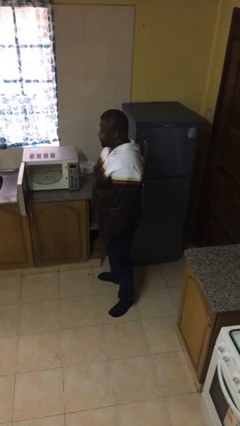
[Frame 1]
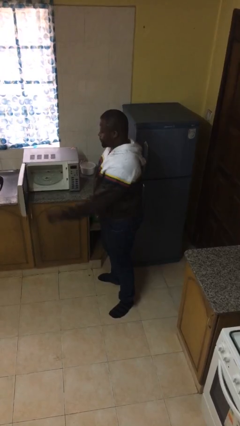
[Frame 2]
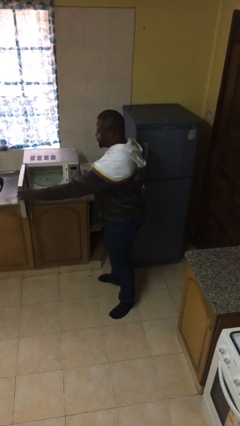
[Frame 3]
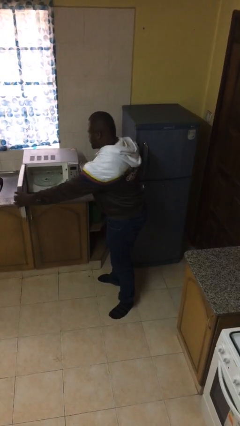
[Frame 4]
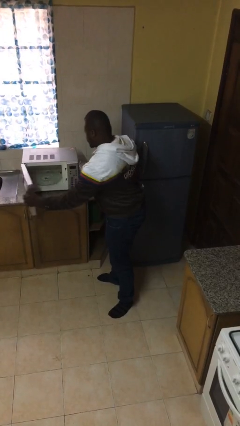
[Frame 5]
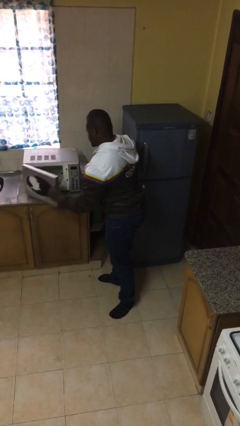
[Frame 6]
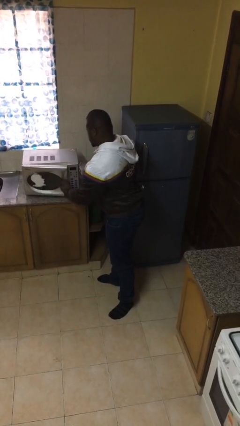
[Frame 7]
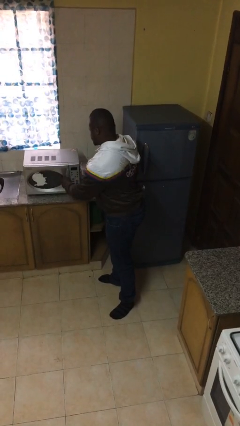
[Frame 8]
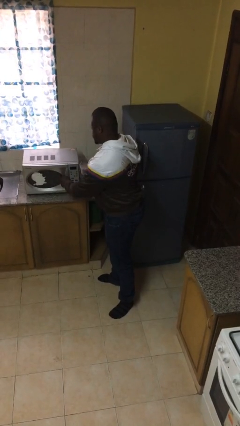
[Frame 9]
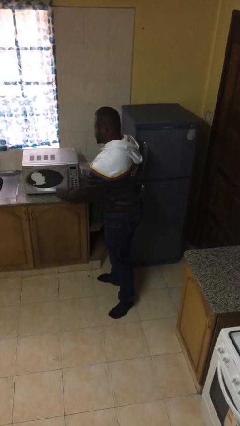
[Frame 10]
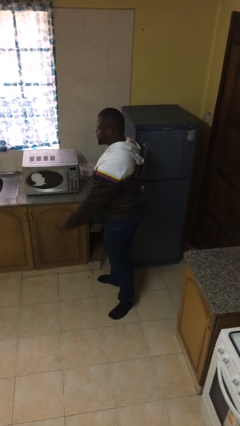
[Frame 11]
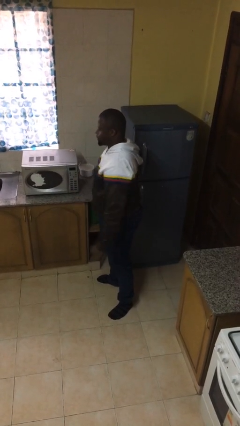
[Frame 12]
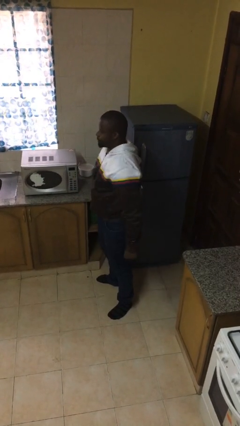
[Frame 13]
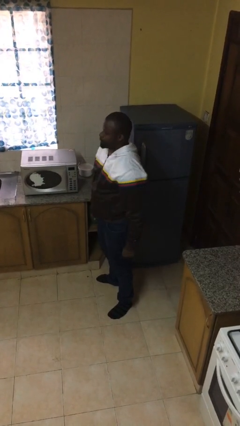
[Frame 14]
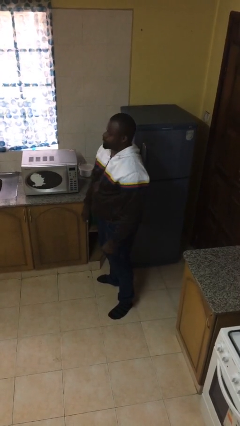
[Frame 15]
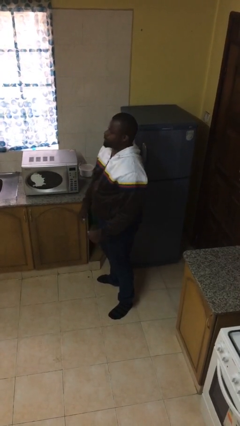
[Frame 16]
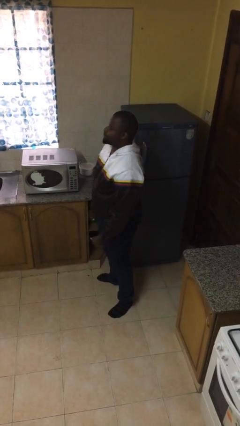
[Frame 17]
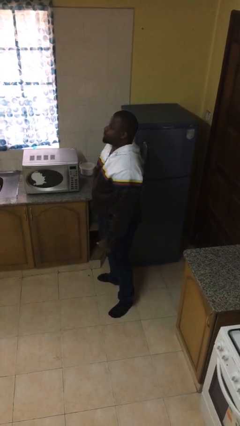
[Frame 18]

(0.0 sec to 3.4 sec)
person closes microwave

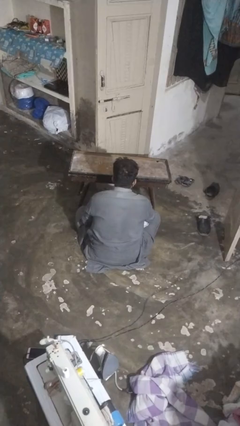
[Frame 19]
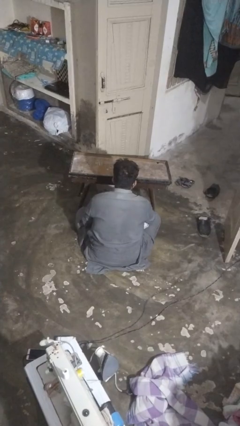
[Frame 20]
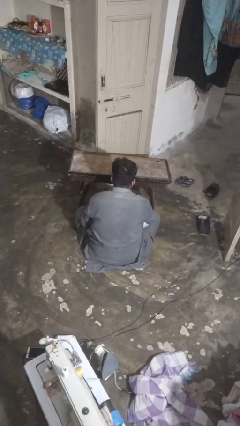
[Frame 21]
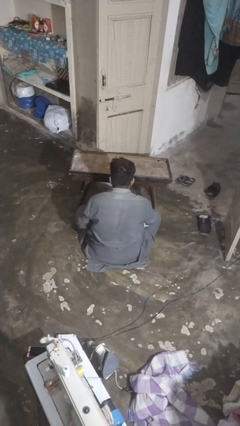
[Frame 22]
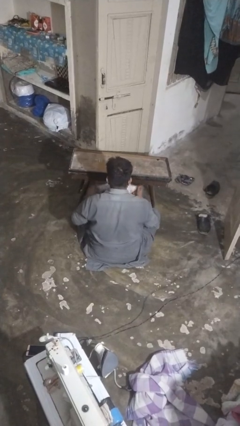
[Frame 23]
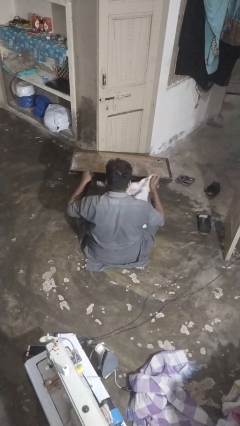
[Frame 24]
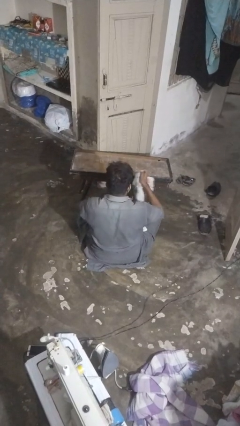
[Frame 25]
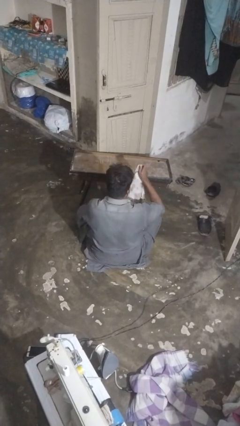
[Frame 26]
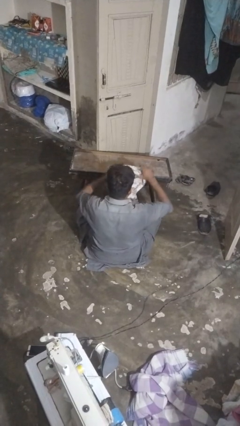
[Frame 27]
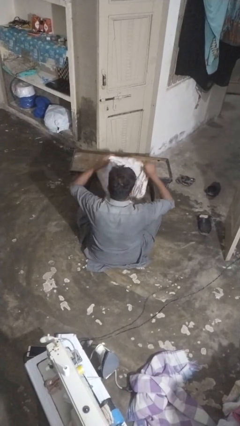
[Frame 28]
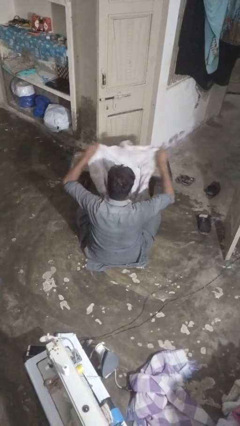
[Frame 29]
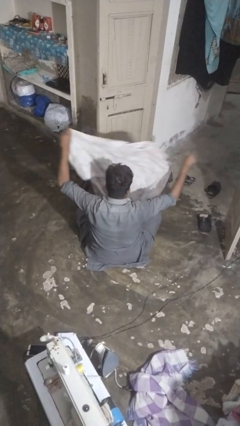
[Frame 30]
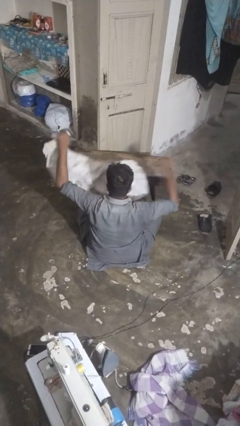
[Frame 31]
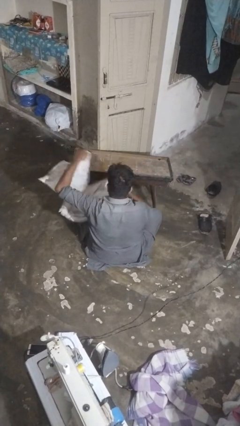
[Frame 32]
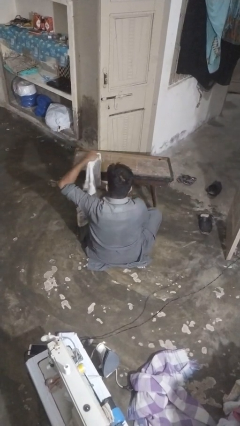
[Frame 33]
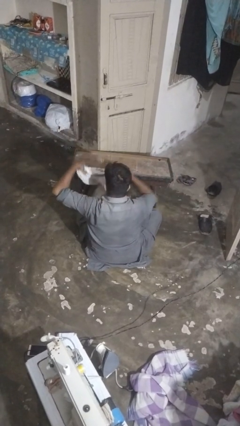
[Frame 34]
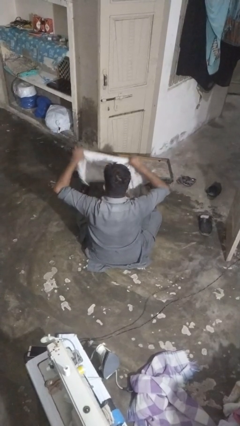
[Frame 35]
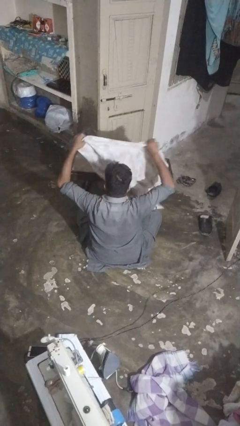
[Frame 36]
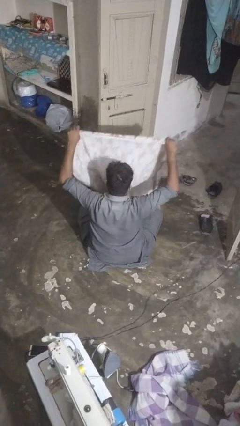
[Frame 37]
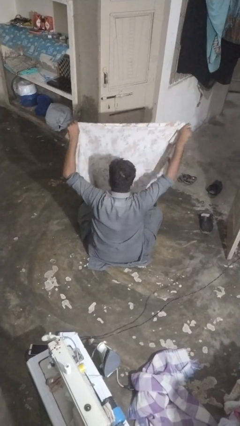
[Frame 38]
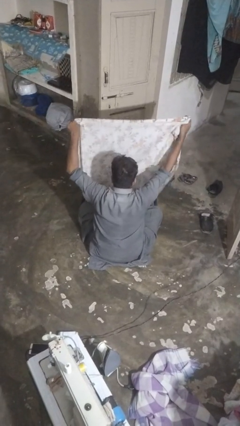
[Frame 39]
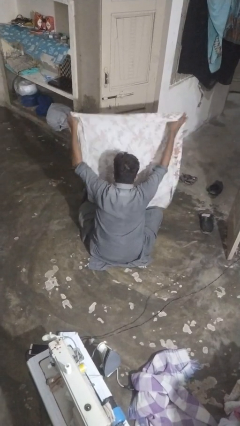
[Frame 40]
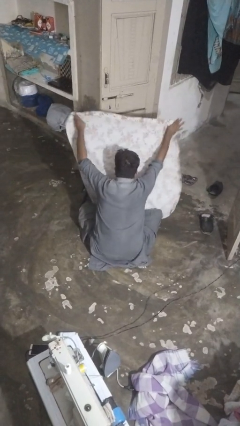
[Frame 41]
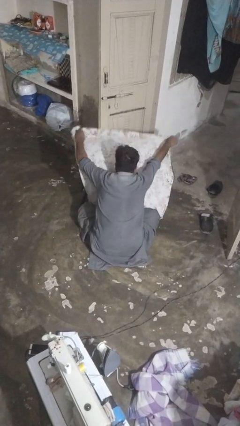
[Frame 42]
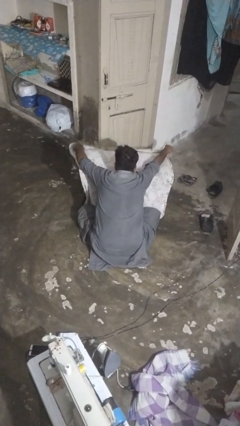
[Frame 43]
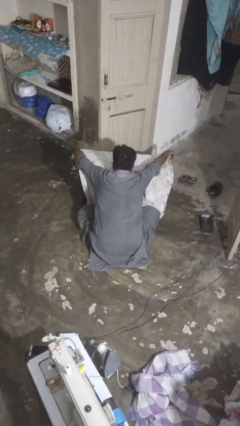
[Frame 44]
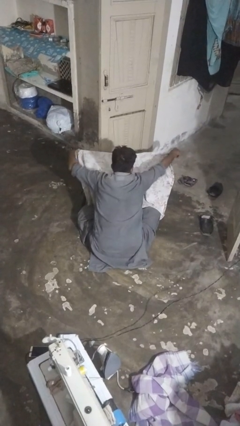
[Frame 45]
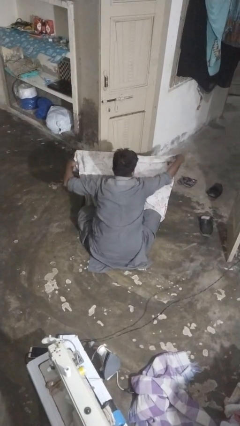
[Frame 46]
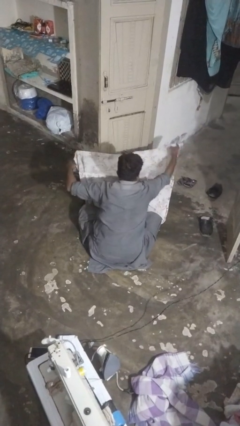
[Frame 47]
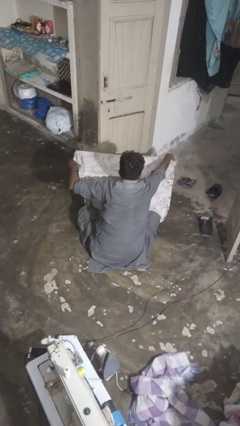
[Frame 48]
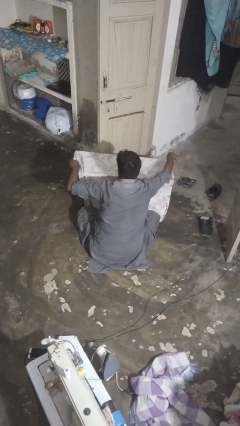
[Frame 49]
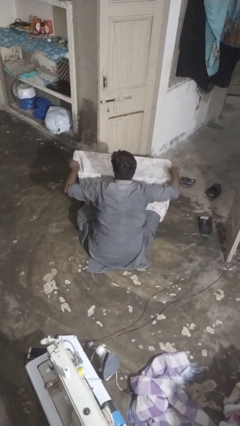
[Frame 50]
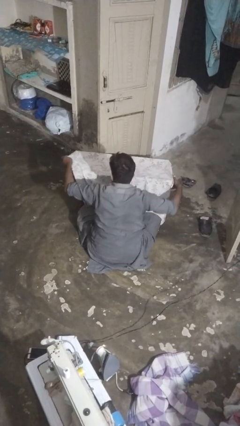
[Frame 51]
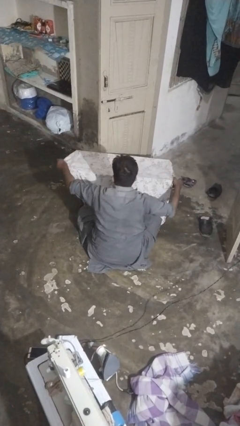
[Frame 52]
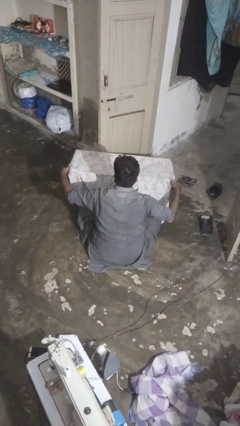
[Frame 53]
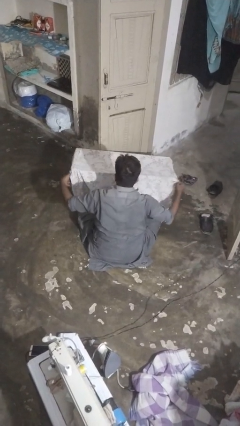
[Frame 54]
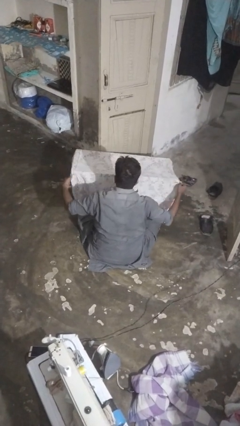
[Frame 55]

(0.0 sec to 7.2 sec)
person spreads tablecloth

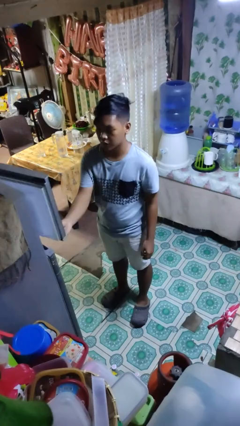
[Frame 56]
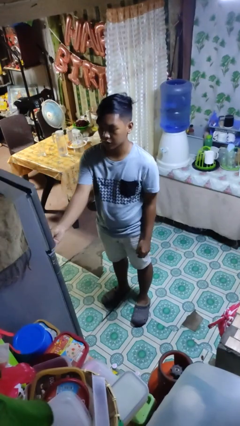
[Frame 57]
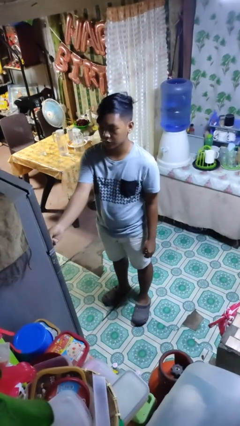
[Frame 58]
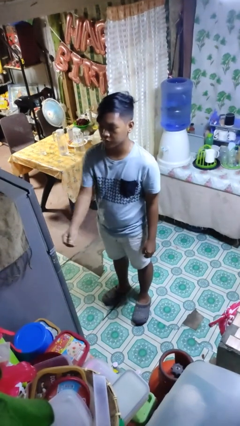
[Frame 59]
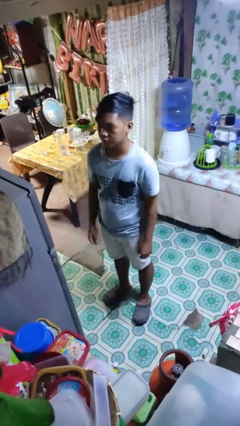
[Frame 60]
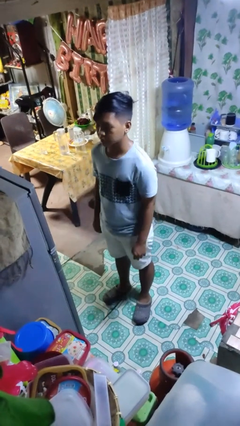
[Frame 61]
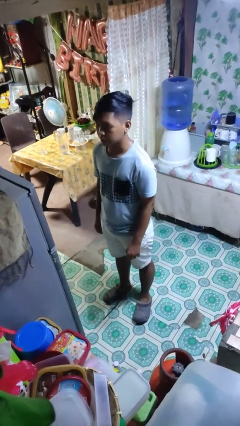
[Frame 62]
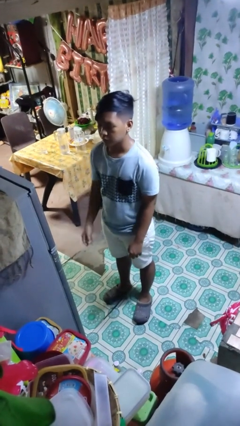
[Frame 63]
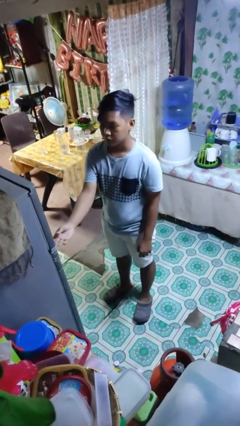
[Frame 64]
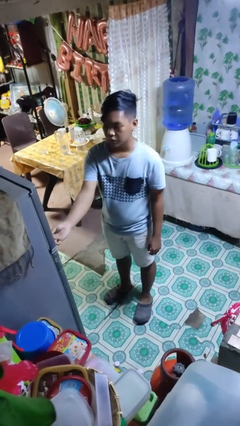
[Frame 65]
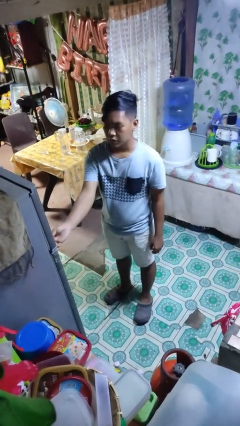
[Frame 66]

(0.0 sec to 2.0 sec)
person closes refrigerator

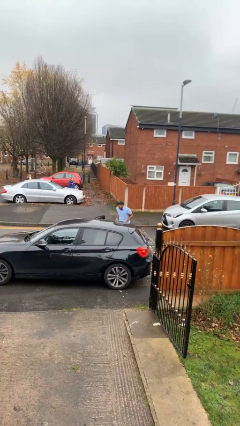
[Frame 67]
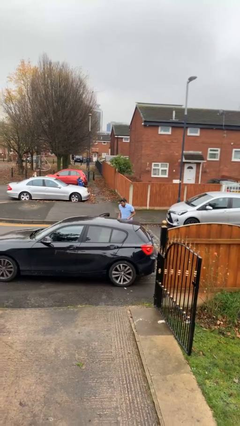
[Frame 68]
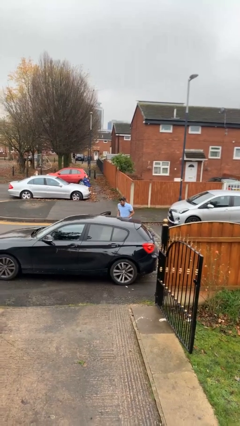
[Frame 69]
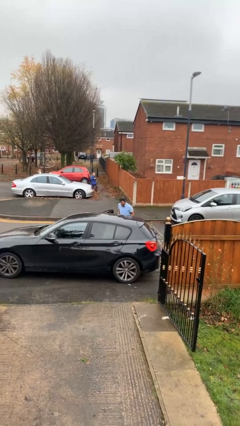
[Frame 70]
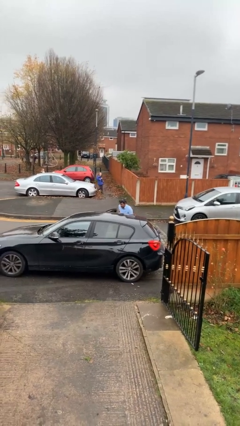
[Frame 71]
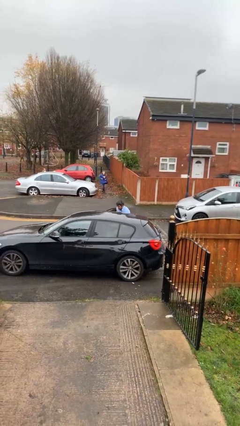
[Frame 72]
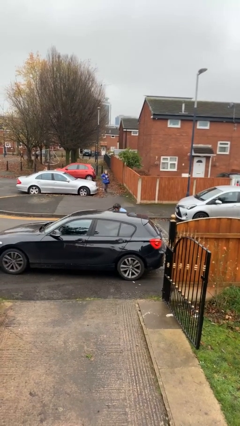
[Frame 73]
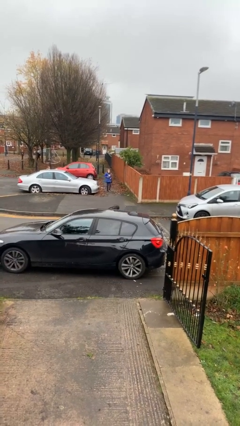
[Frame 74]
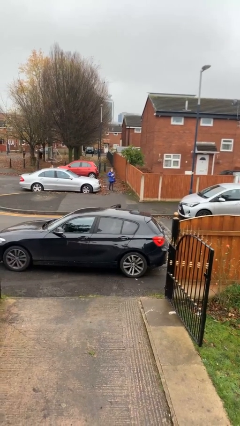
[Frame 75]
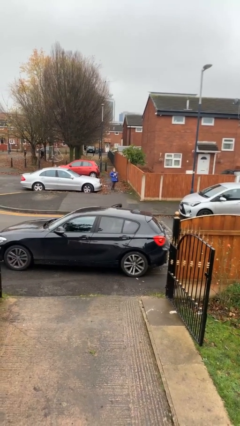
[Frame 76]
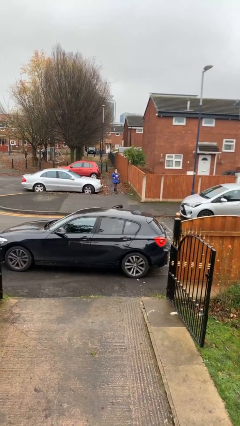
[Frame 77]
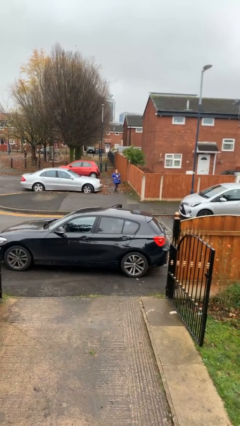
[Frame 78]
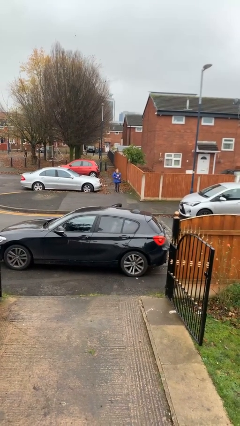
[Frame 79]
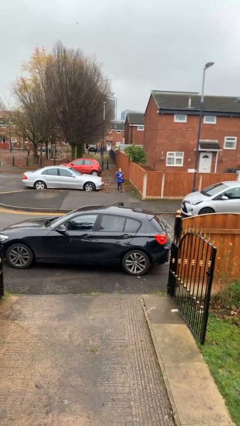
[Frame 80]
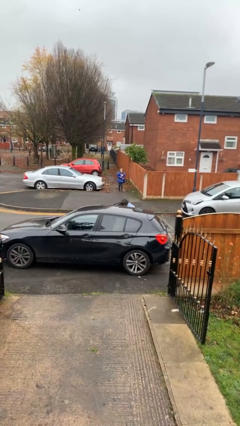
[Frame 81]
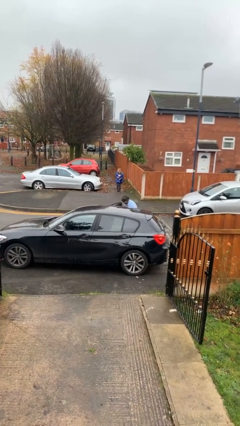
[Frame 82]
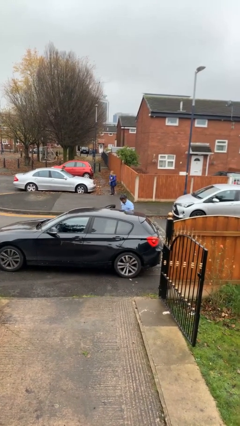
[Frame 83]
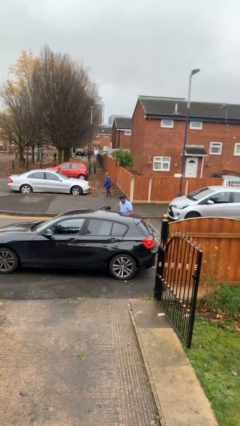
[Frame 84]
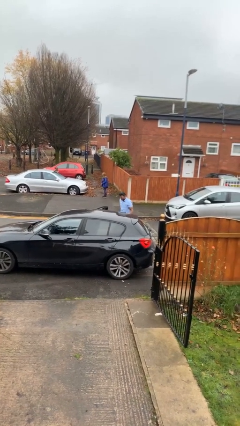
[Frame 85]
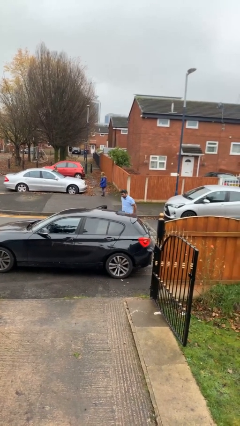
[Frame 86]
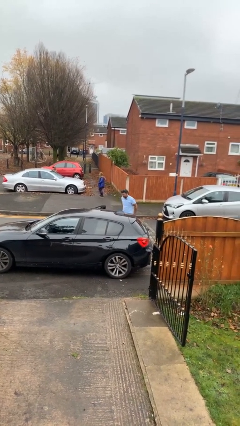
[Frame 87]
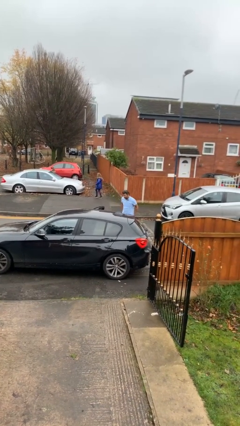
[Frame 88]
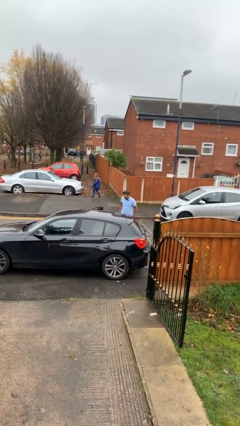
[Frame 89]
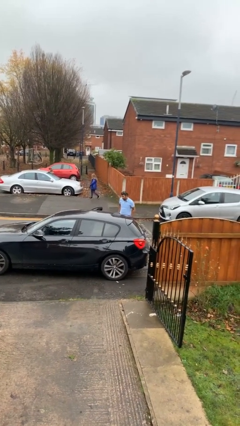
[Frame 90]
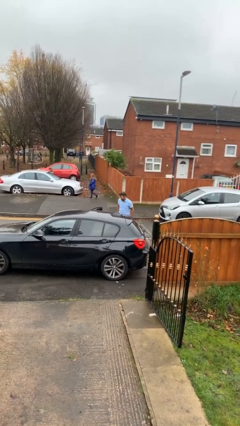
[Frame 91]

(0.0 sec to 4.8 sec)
person loads car

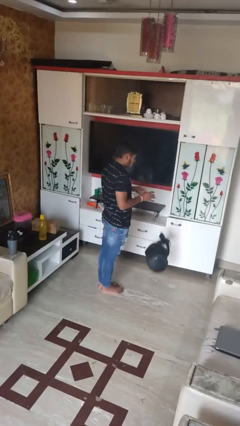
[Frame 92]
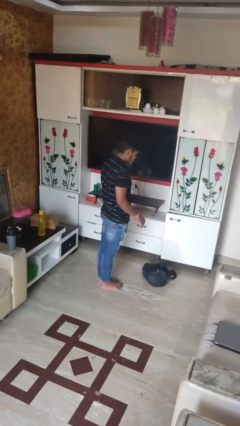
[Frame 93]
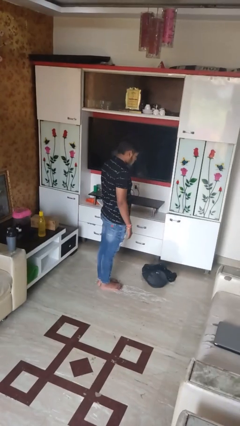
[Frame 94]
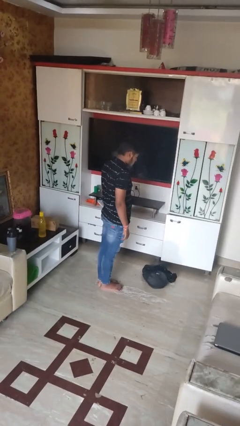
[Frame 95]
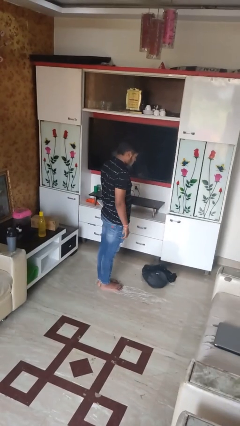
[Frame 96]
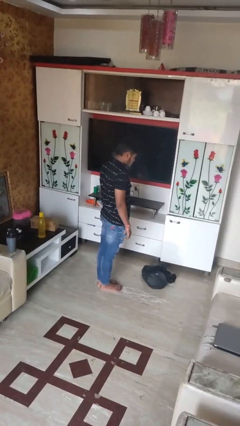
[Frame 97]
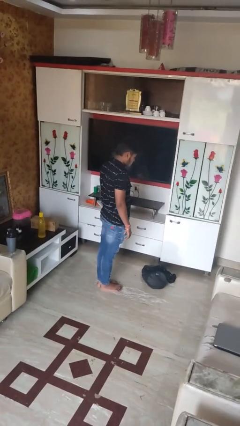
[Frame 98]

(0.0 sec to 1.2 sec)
person drops object
